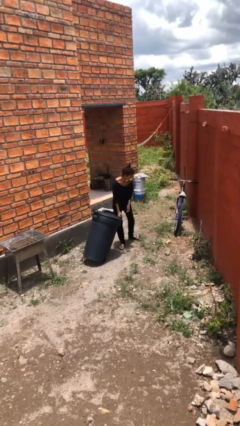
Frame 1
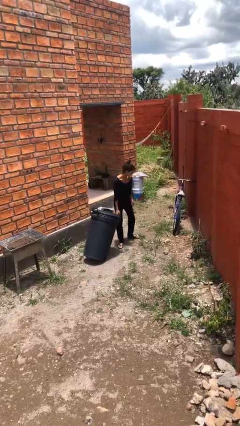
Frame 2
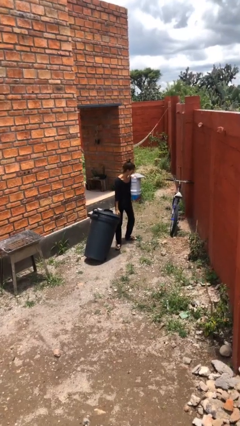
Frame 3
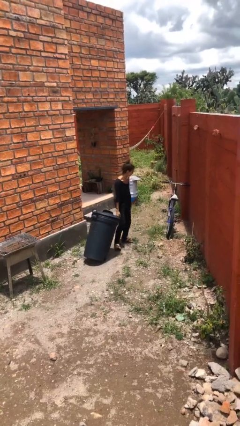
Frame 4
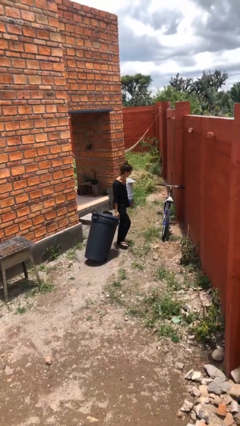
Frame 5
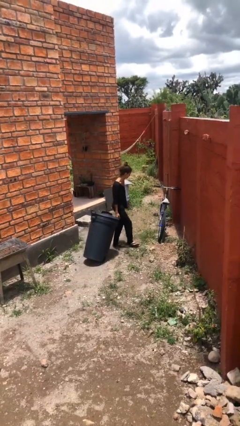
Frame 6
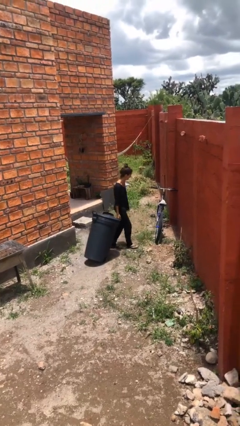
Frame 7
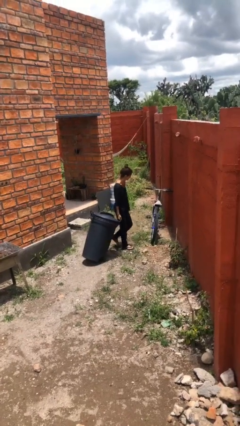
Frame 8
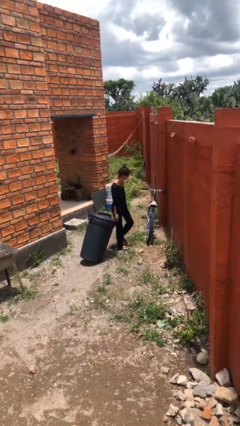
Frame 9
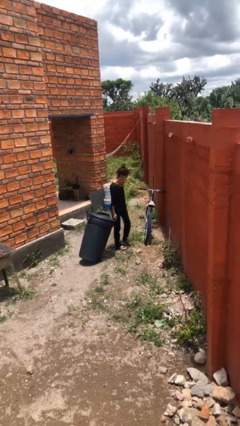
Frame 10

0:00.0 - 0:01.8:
person pulls wheeled trashcan

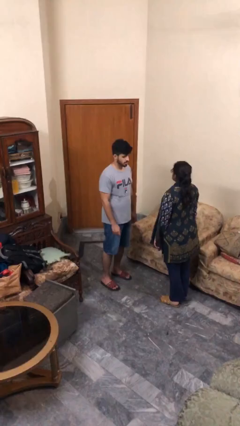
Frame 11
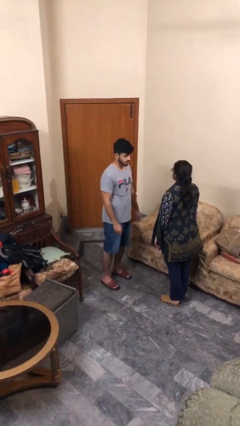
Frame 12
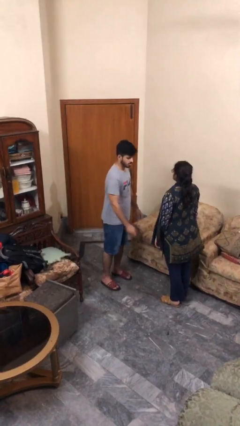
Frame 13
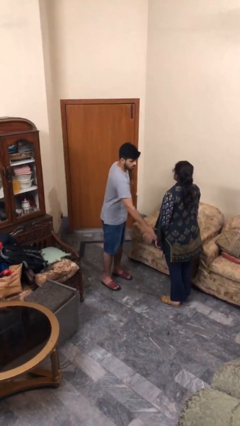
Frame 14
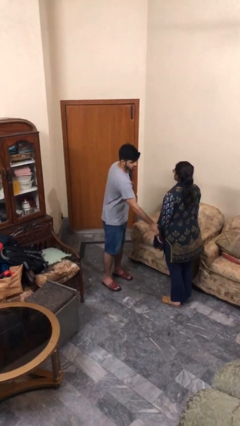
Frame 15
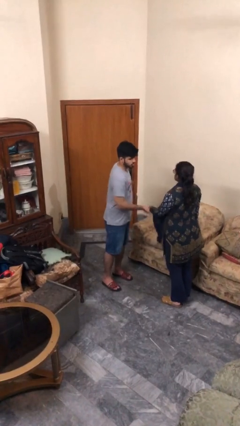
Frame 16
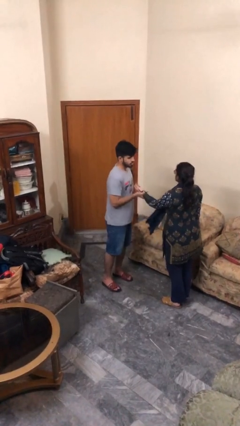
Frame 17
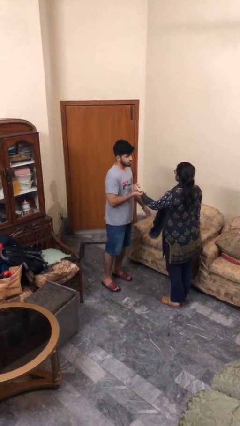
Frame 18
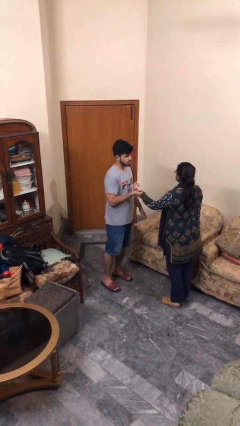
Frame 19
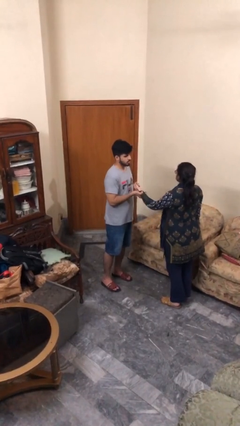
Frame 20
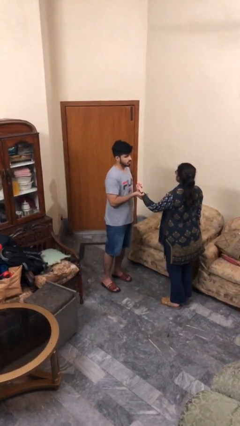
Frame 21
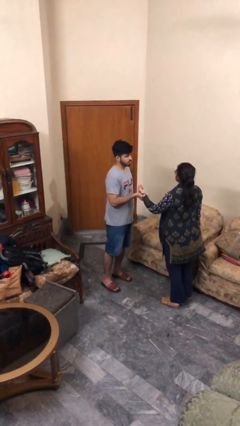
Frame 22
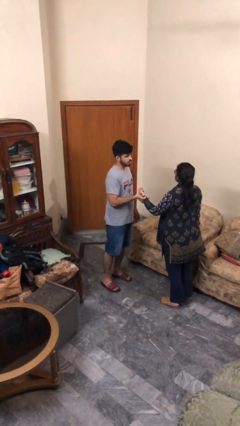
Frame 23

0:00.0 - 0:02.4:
person grabs person by forearm

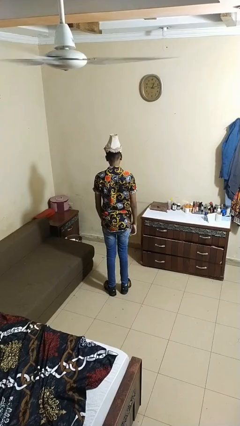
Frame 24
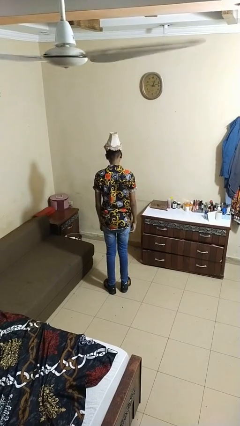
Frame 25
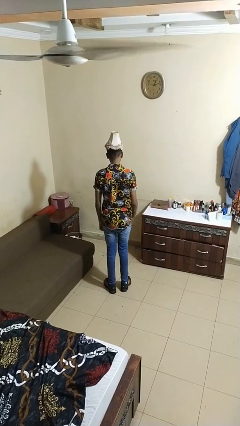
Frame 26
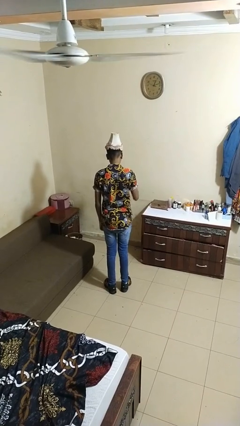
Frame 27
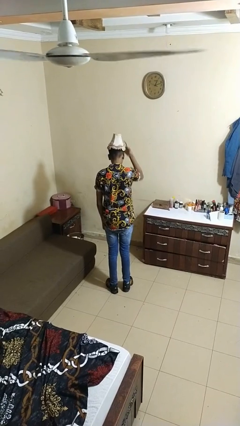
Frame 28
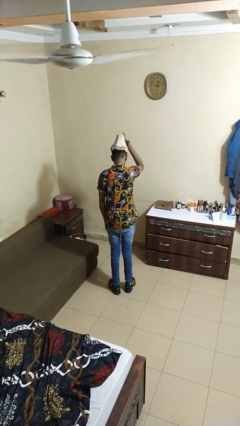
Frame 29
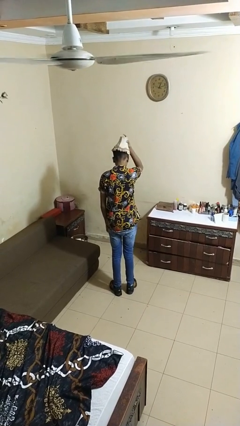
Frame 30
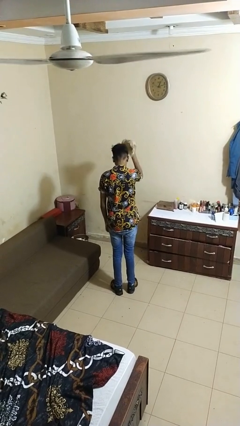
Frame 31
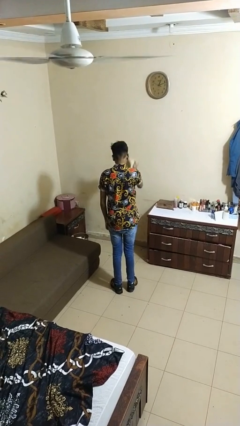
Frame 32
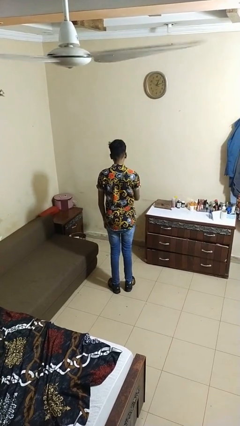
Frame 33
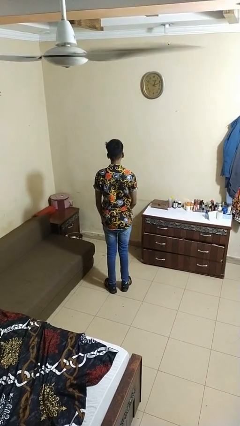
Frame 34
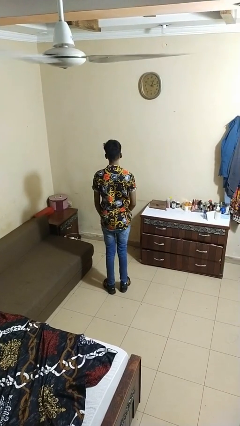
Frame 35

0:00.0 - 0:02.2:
person takes off hat

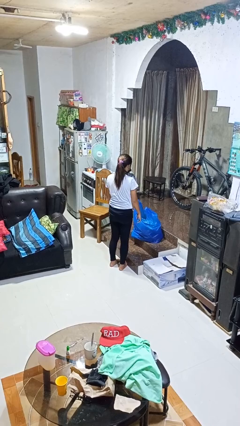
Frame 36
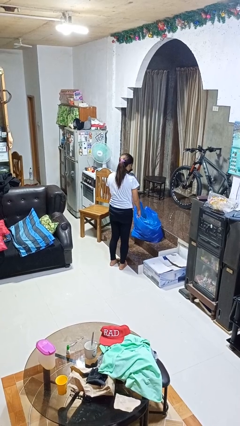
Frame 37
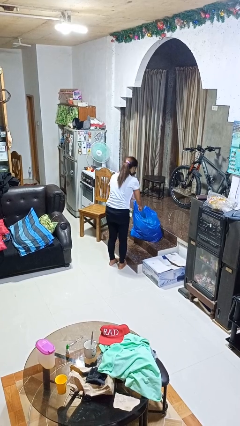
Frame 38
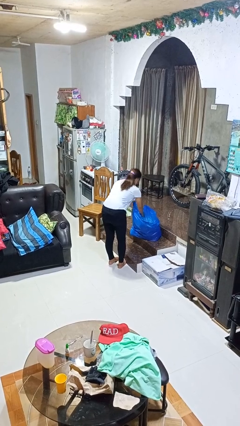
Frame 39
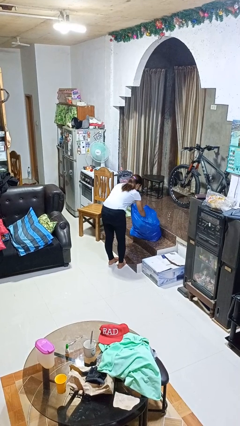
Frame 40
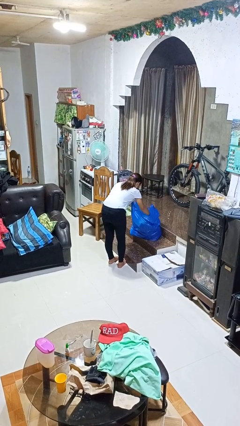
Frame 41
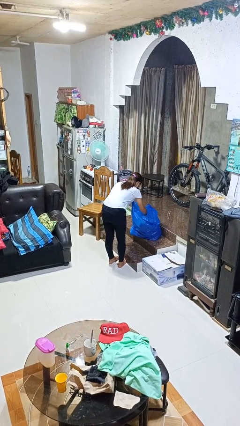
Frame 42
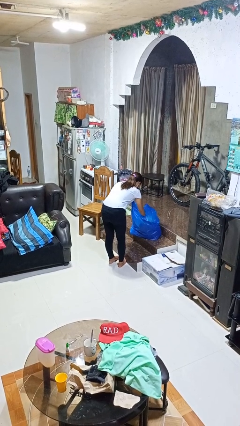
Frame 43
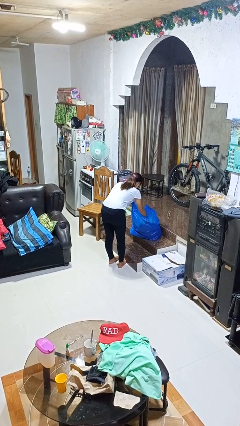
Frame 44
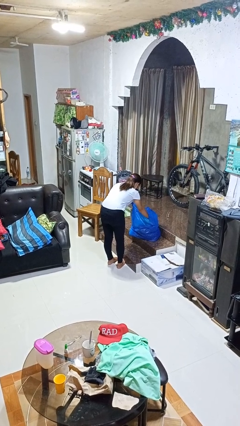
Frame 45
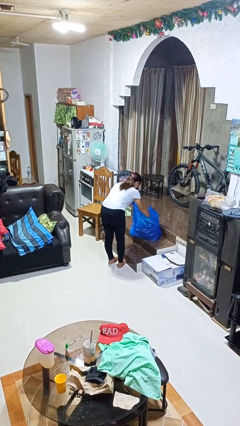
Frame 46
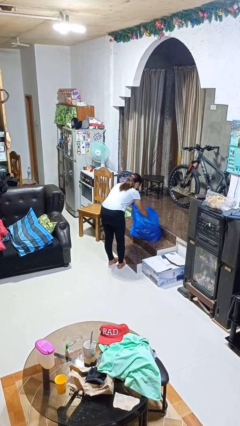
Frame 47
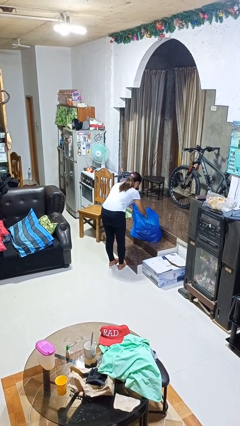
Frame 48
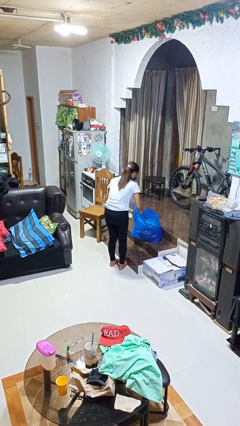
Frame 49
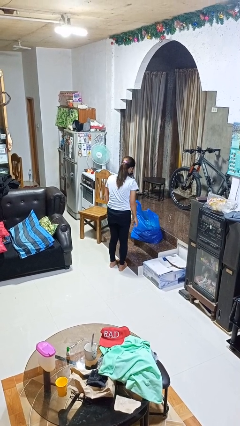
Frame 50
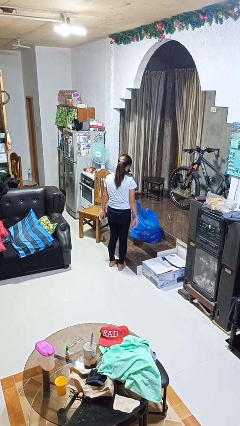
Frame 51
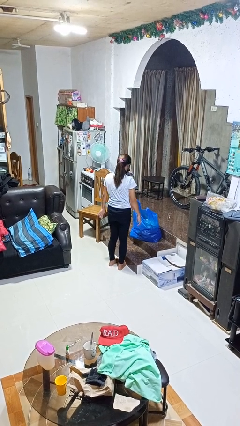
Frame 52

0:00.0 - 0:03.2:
person searches in bag

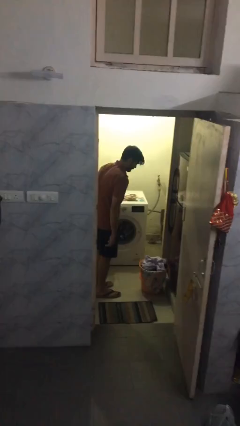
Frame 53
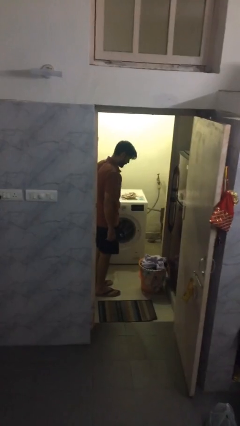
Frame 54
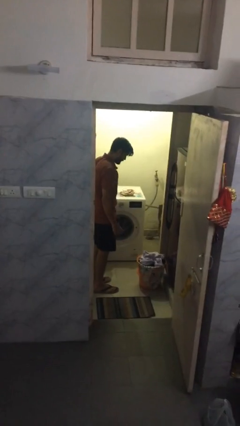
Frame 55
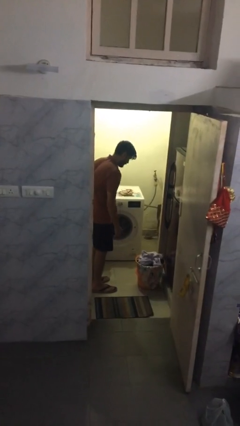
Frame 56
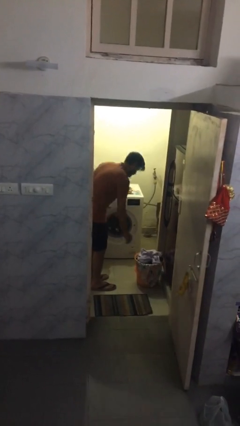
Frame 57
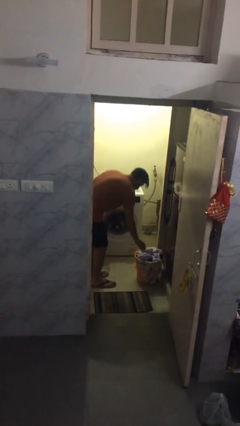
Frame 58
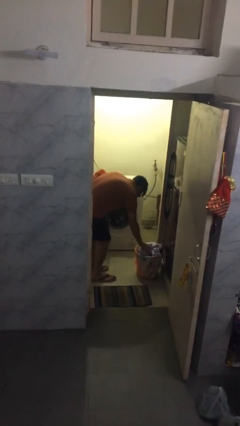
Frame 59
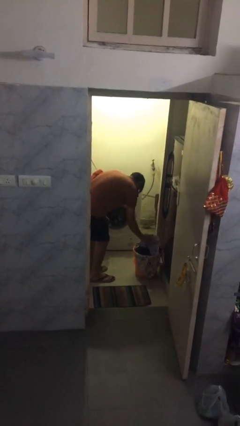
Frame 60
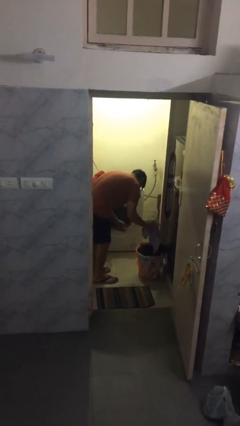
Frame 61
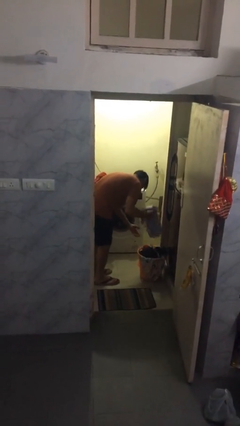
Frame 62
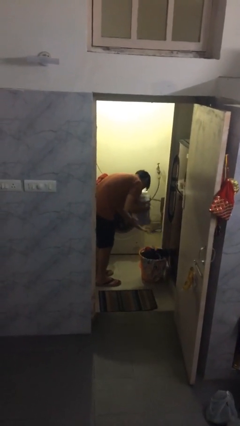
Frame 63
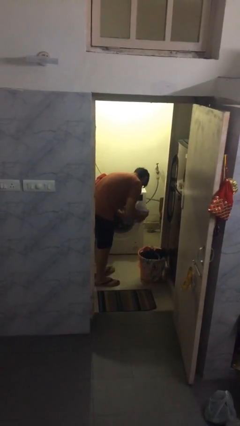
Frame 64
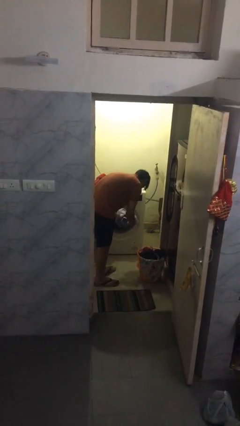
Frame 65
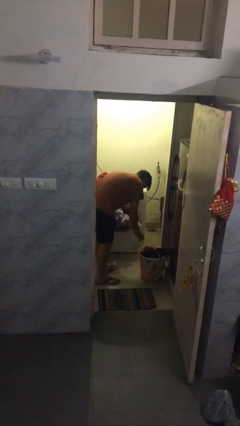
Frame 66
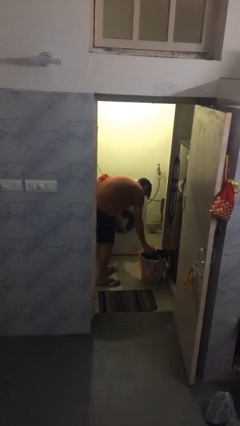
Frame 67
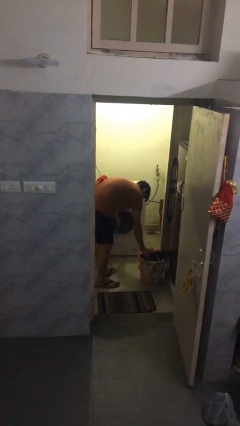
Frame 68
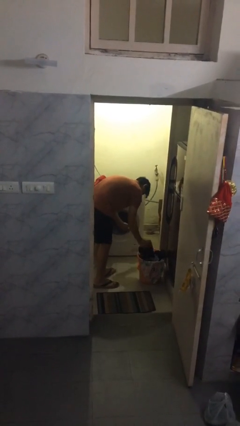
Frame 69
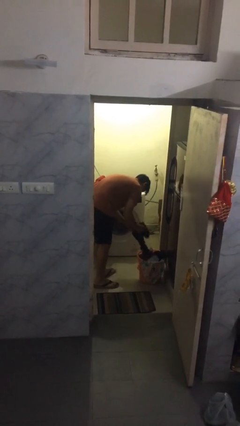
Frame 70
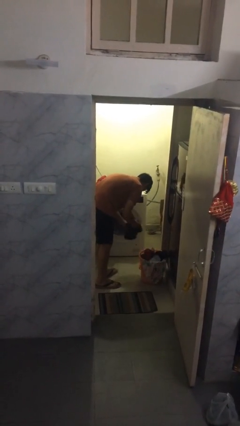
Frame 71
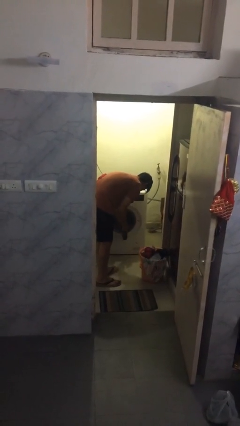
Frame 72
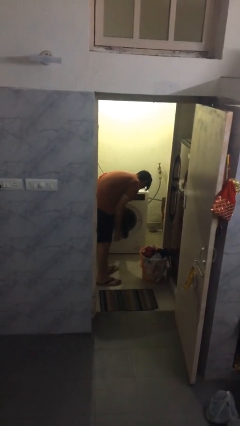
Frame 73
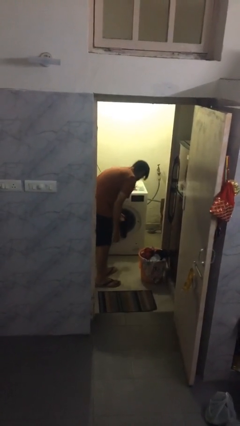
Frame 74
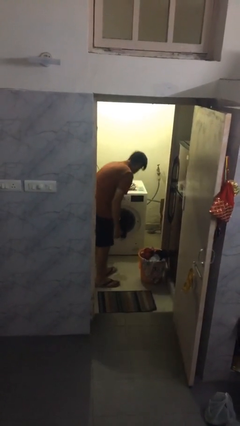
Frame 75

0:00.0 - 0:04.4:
person loads clotheswasher

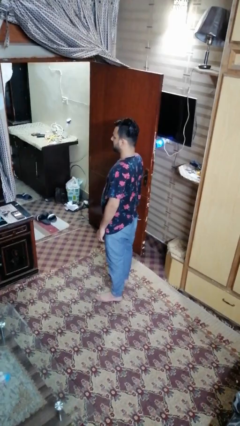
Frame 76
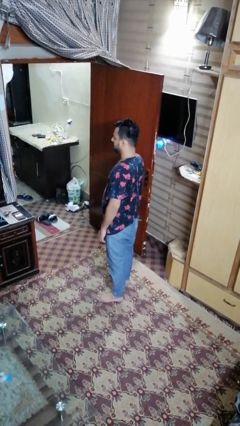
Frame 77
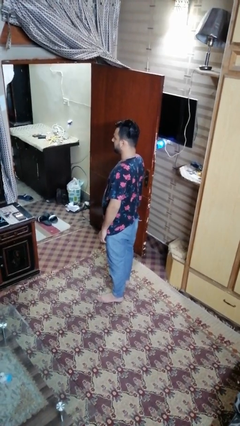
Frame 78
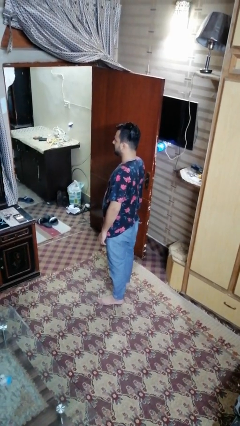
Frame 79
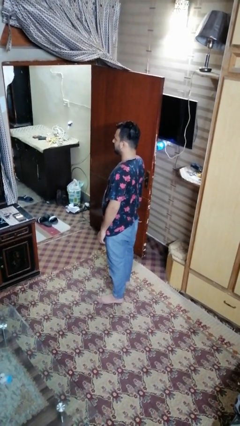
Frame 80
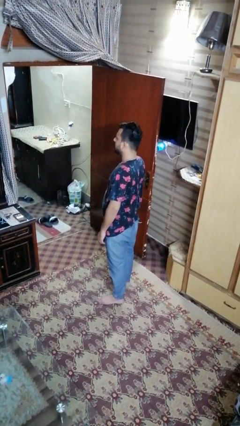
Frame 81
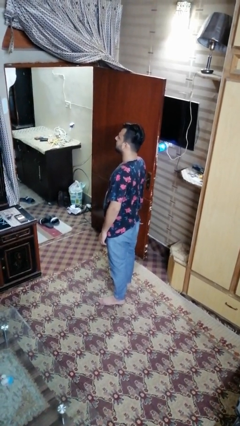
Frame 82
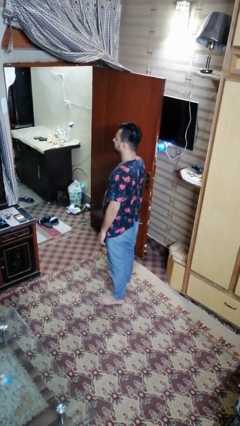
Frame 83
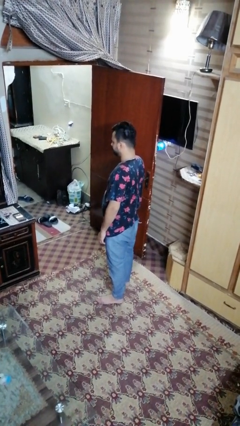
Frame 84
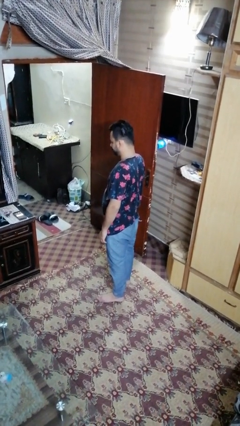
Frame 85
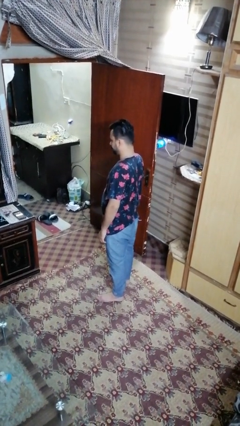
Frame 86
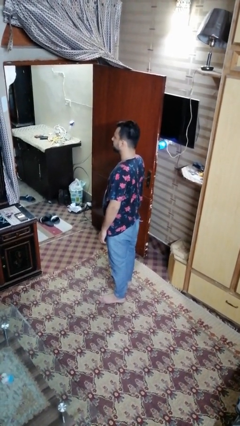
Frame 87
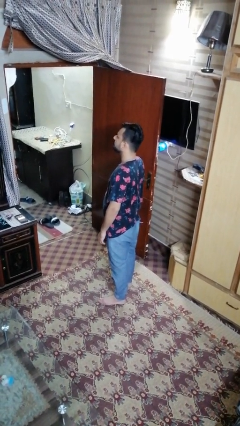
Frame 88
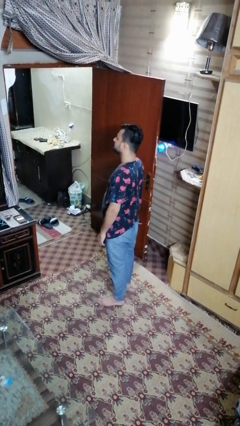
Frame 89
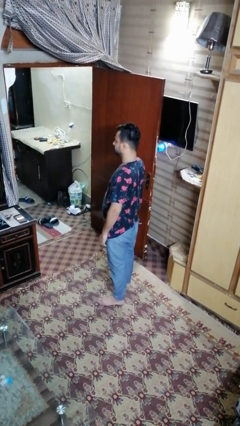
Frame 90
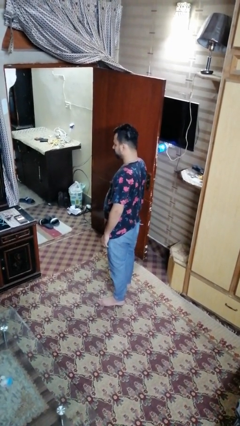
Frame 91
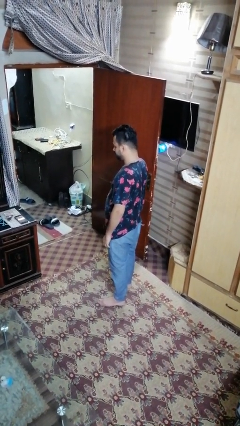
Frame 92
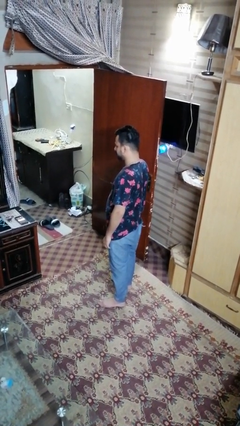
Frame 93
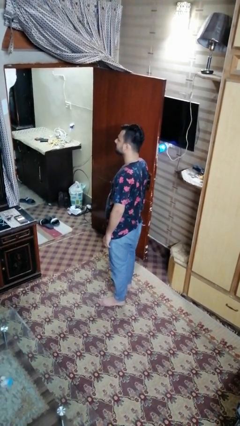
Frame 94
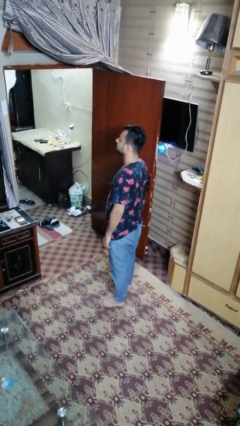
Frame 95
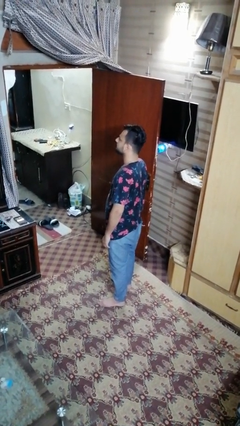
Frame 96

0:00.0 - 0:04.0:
person nods head
